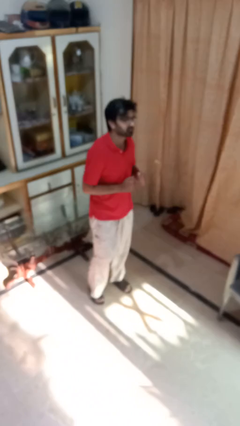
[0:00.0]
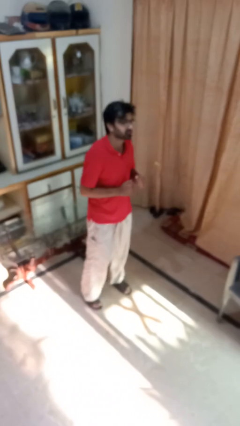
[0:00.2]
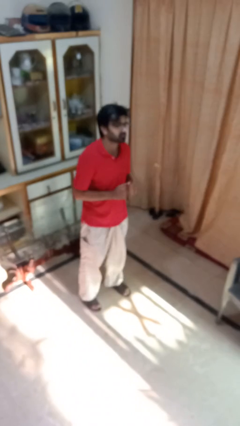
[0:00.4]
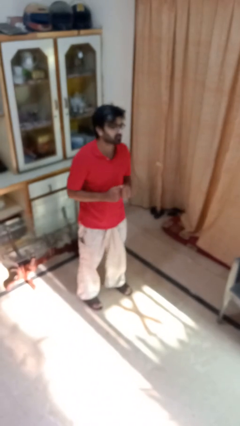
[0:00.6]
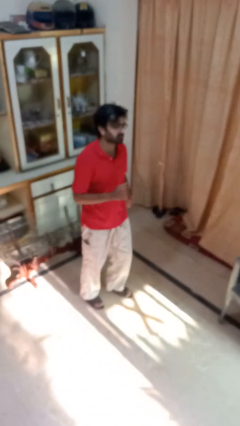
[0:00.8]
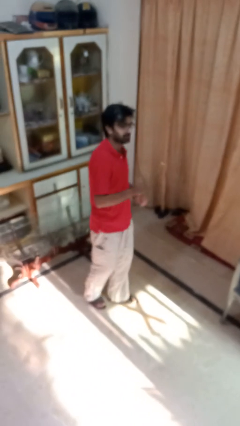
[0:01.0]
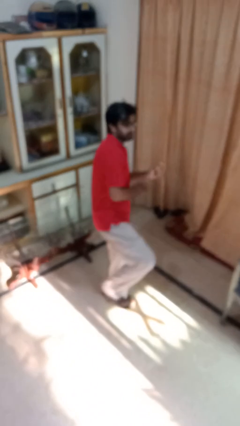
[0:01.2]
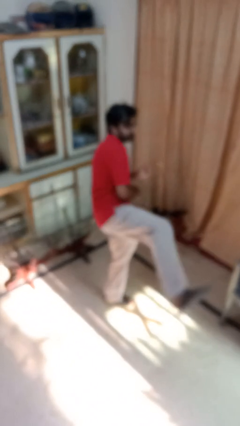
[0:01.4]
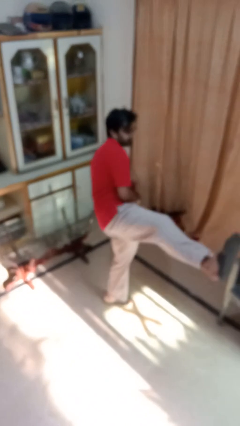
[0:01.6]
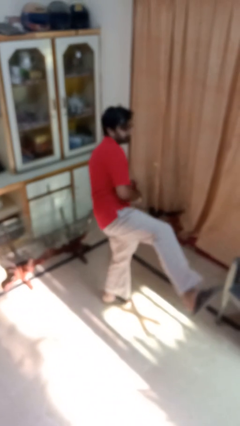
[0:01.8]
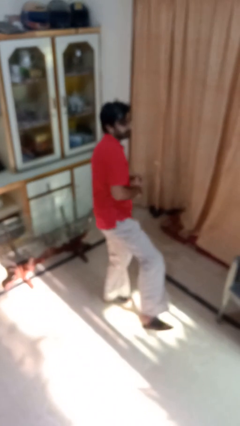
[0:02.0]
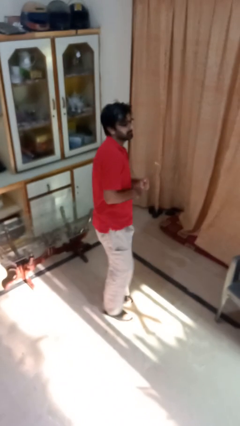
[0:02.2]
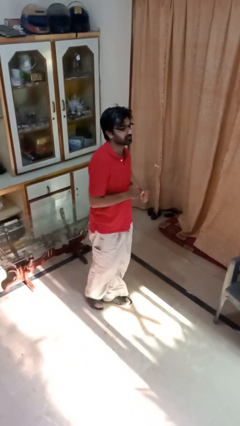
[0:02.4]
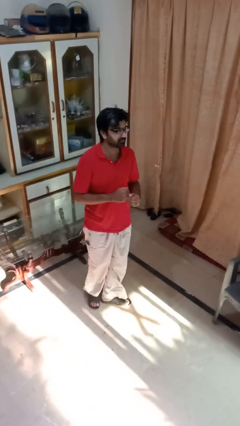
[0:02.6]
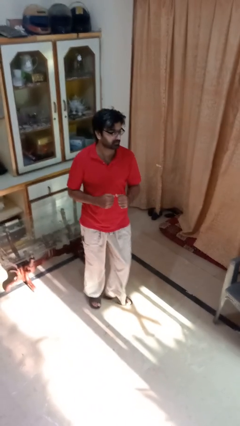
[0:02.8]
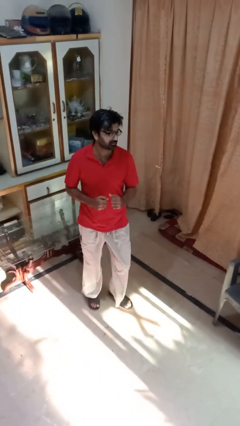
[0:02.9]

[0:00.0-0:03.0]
person karate kicks

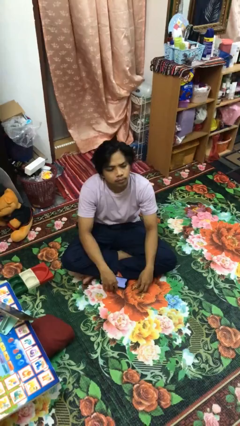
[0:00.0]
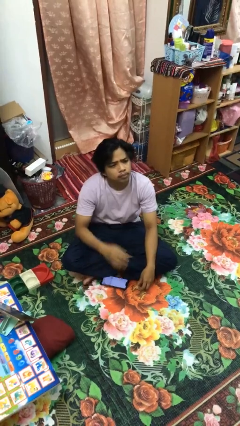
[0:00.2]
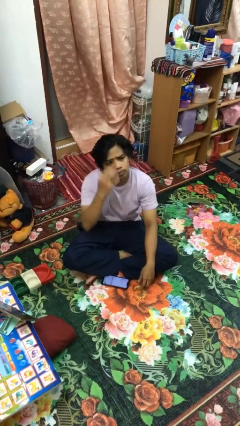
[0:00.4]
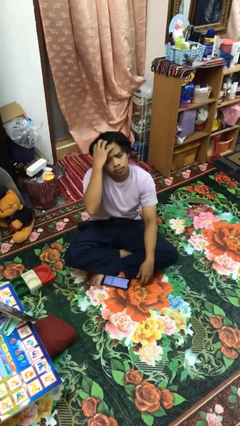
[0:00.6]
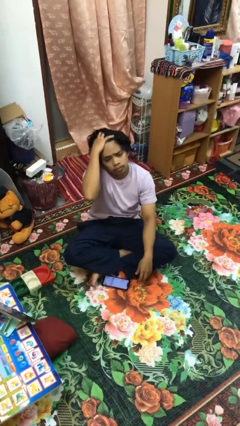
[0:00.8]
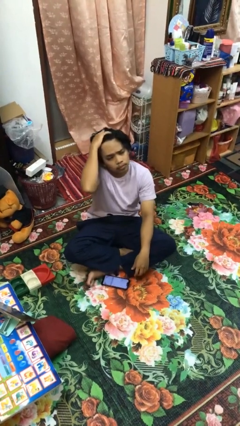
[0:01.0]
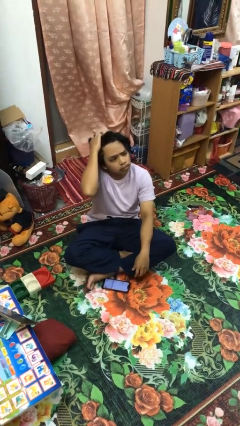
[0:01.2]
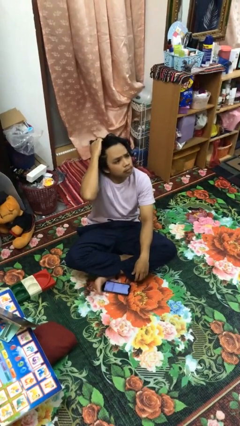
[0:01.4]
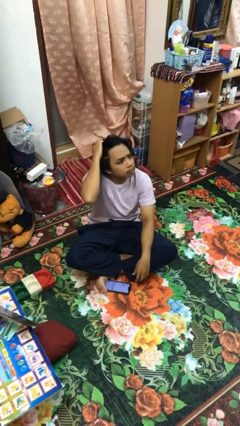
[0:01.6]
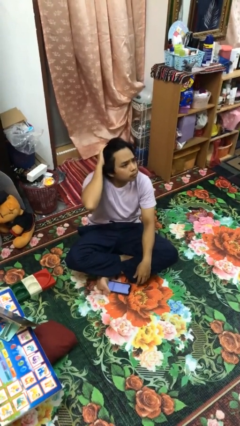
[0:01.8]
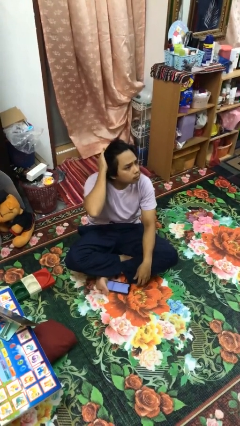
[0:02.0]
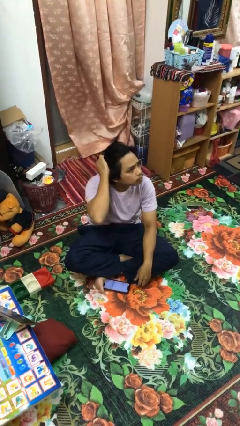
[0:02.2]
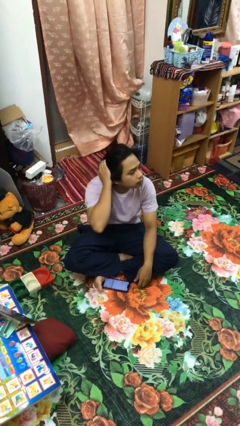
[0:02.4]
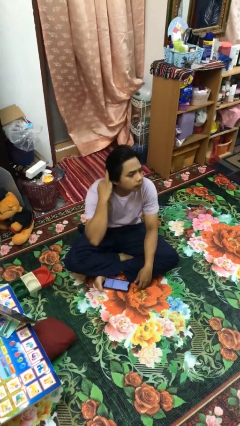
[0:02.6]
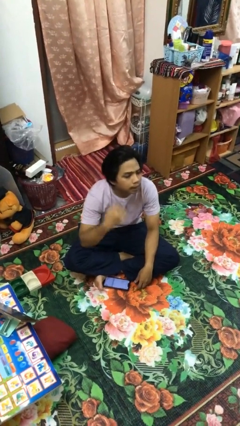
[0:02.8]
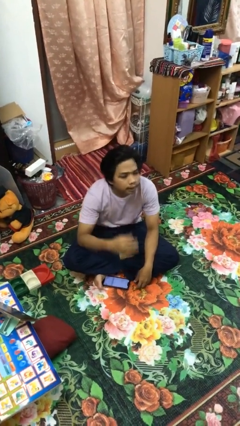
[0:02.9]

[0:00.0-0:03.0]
person strokes hair

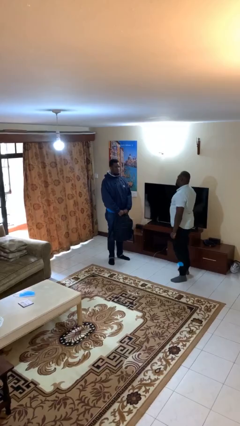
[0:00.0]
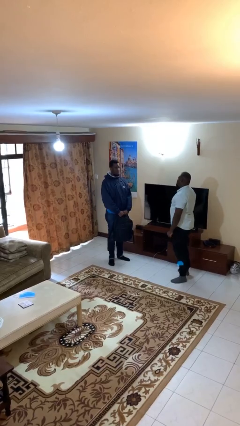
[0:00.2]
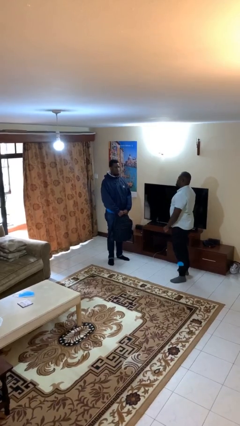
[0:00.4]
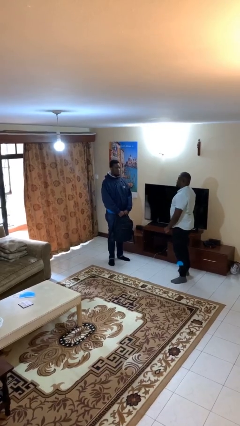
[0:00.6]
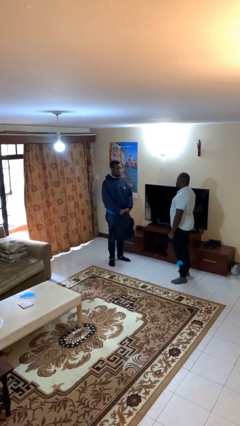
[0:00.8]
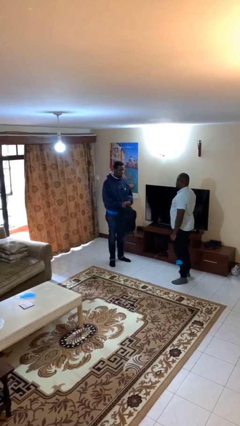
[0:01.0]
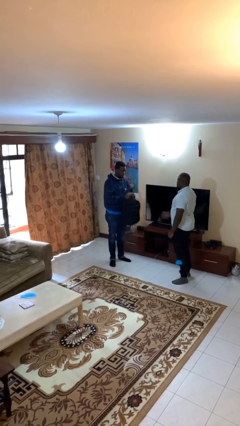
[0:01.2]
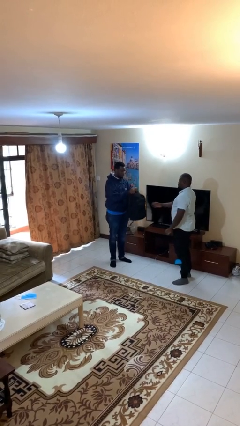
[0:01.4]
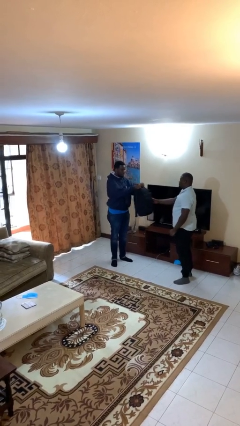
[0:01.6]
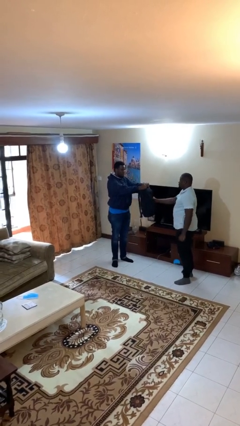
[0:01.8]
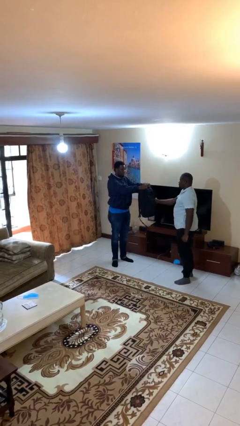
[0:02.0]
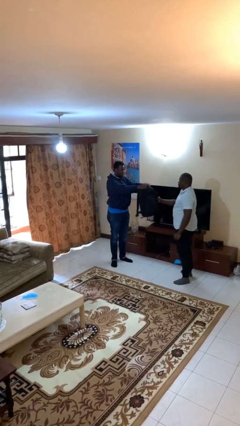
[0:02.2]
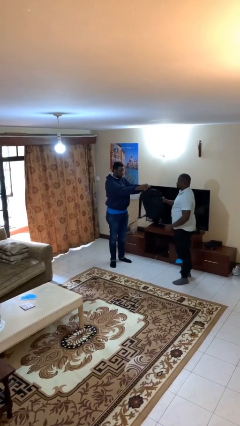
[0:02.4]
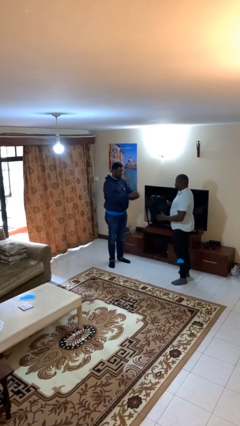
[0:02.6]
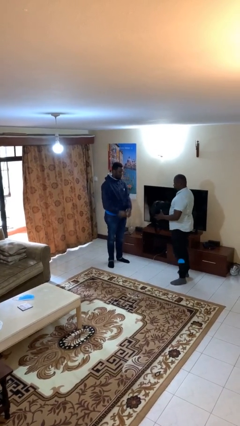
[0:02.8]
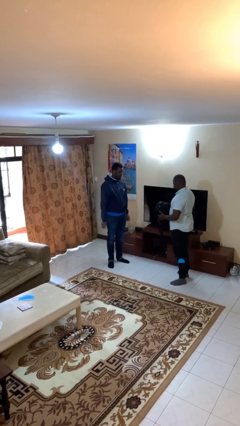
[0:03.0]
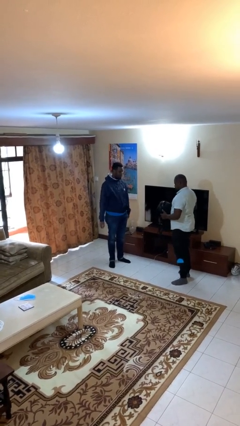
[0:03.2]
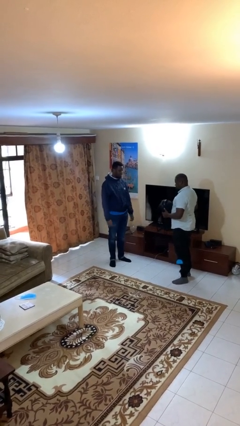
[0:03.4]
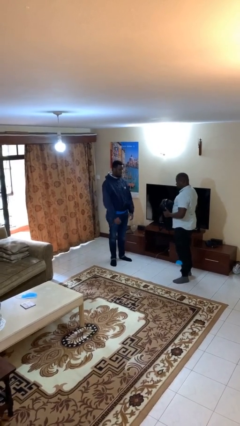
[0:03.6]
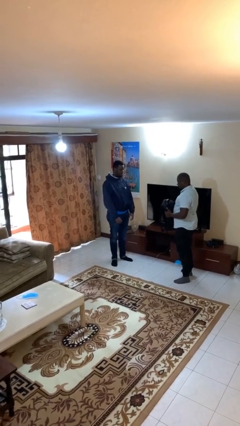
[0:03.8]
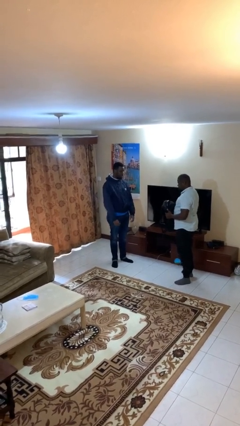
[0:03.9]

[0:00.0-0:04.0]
person transfers object to person

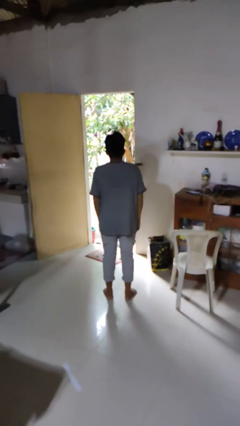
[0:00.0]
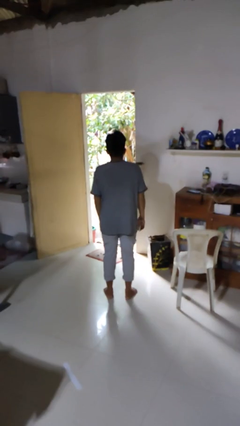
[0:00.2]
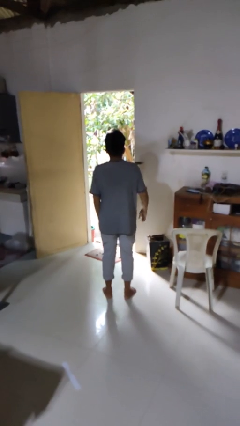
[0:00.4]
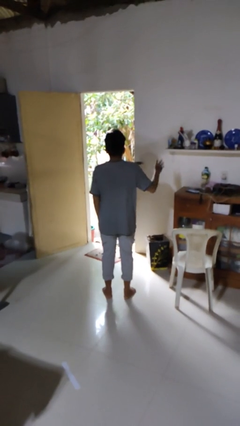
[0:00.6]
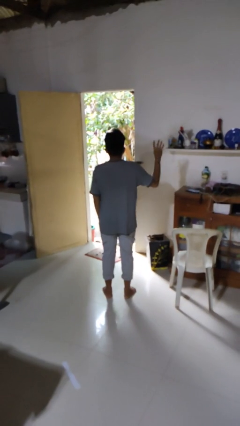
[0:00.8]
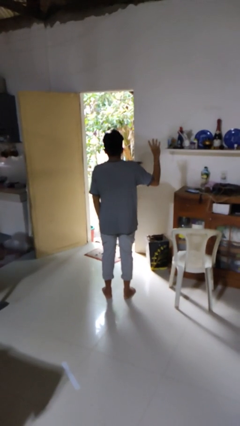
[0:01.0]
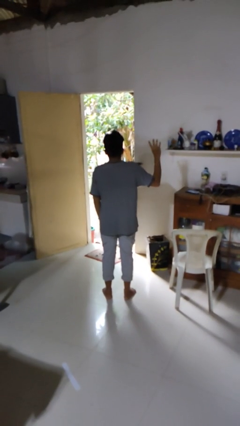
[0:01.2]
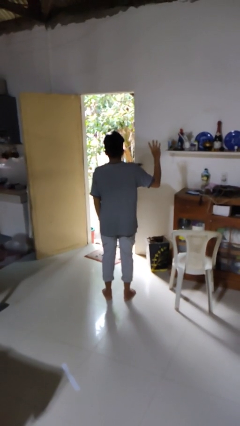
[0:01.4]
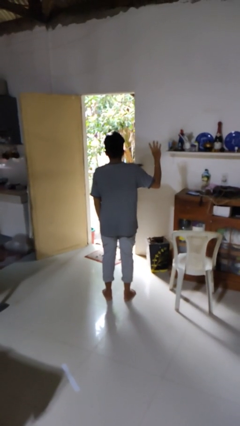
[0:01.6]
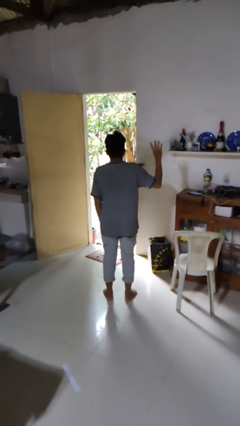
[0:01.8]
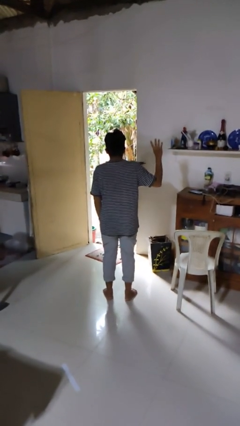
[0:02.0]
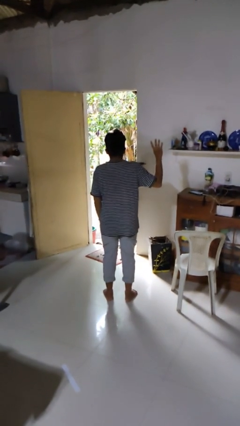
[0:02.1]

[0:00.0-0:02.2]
person gestures number four

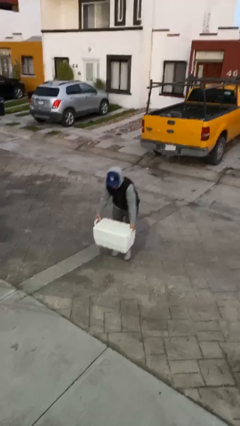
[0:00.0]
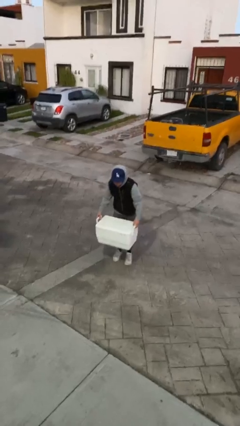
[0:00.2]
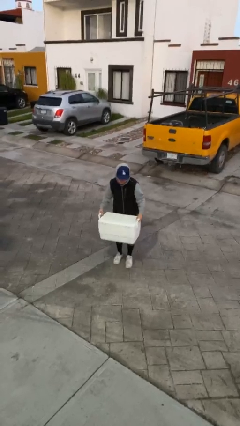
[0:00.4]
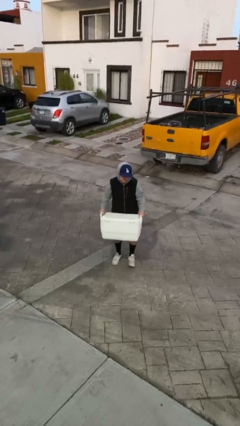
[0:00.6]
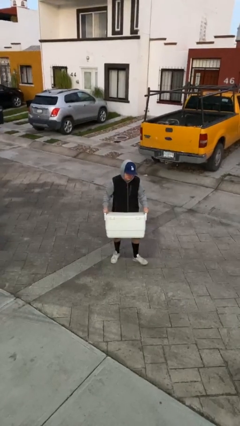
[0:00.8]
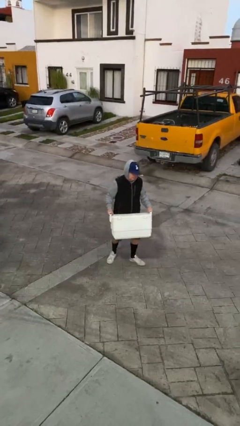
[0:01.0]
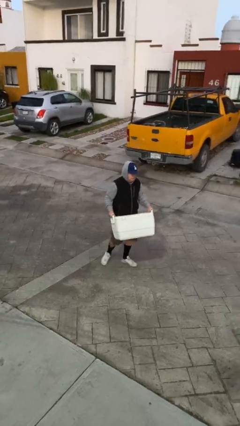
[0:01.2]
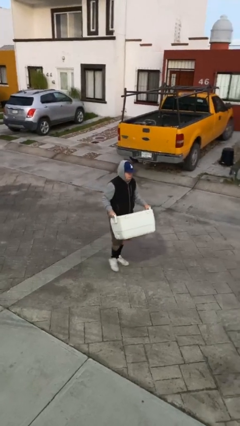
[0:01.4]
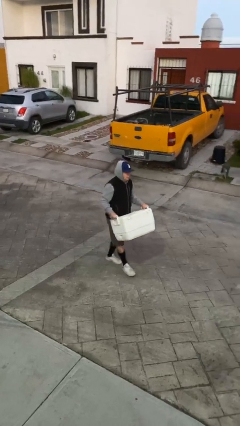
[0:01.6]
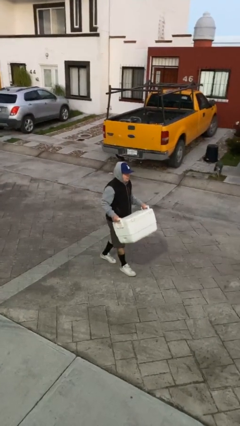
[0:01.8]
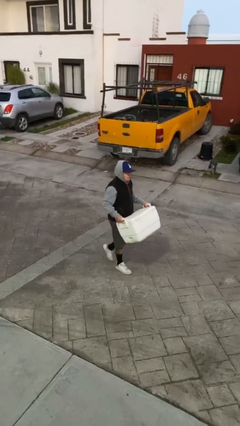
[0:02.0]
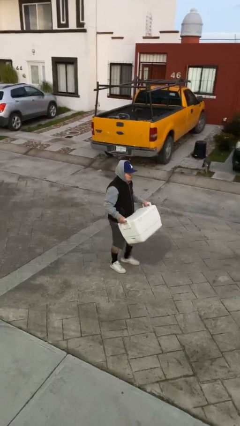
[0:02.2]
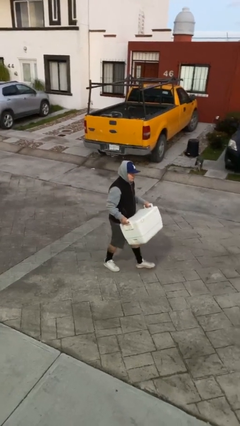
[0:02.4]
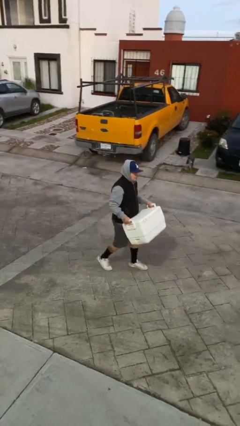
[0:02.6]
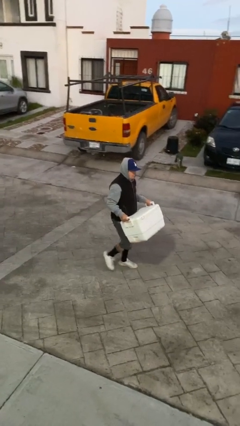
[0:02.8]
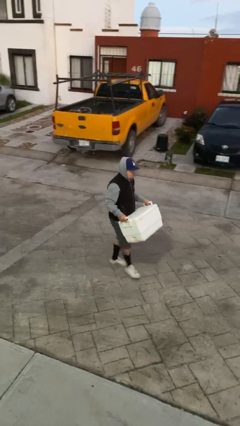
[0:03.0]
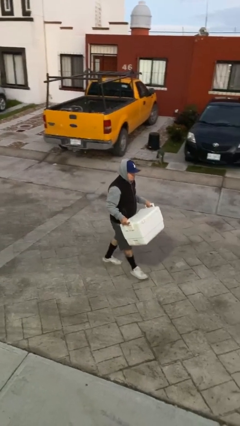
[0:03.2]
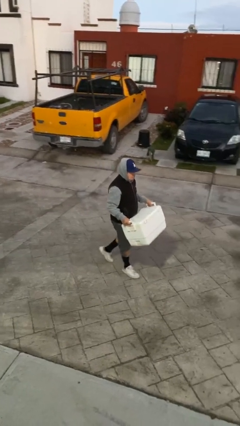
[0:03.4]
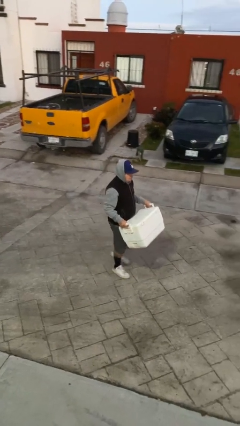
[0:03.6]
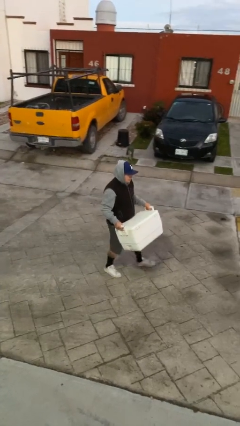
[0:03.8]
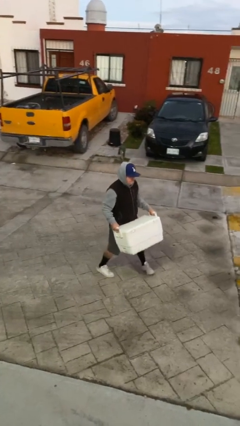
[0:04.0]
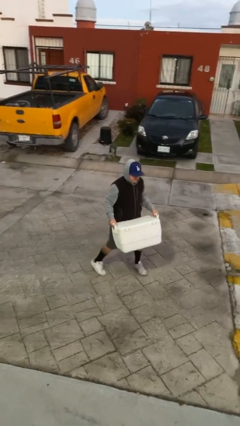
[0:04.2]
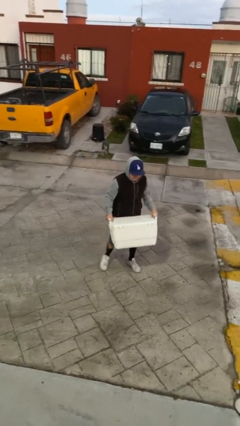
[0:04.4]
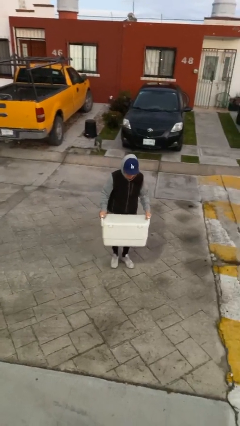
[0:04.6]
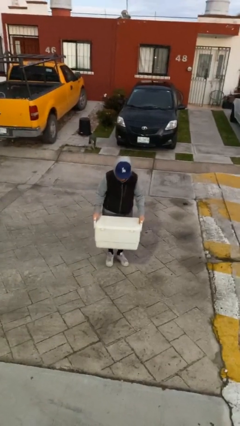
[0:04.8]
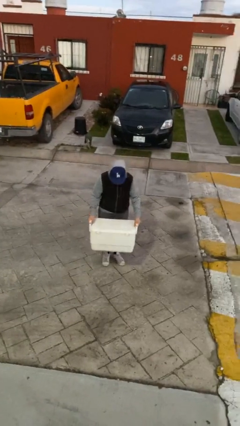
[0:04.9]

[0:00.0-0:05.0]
person carries heavy object

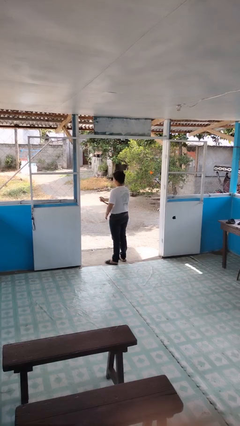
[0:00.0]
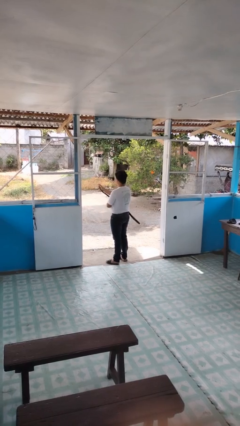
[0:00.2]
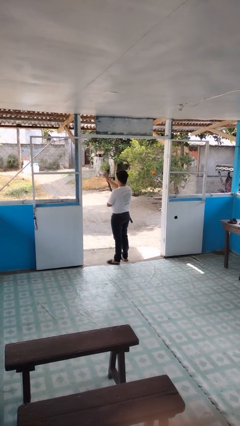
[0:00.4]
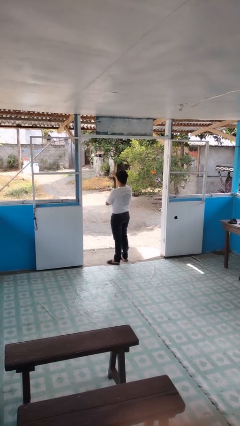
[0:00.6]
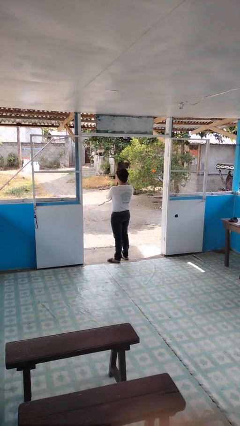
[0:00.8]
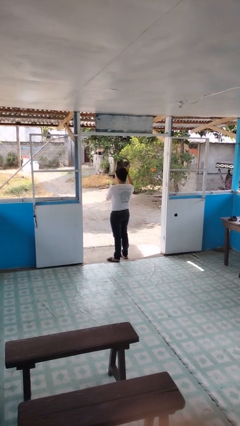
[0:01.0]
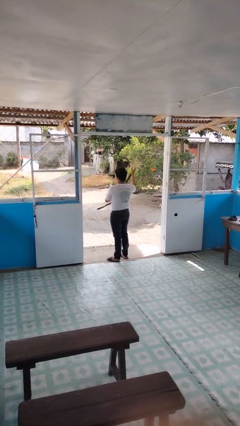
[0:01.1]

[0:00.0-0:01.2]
person takes off belt
